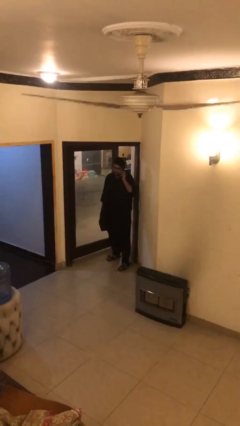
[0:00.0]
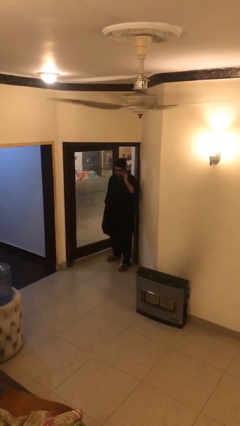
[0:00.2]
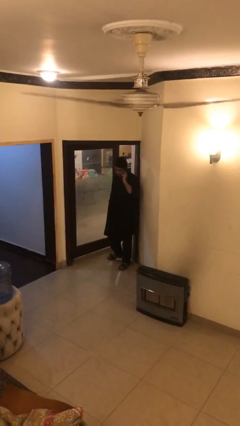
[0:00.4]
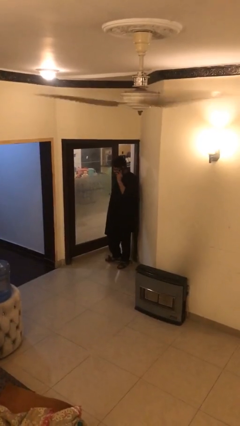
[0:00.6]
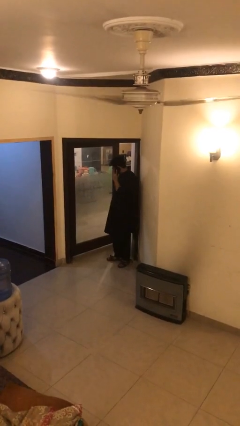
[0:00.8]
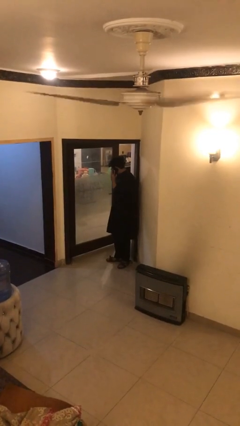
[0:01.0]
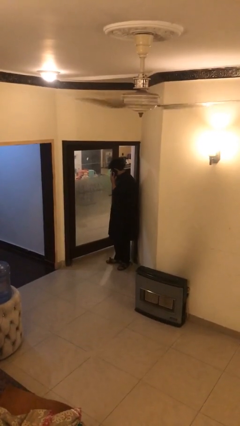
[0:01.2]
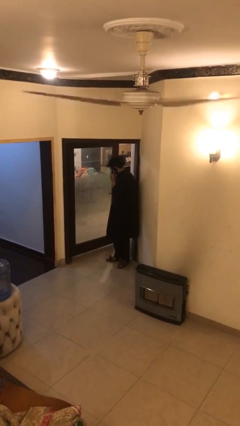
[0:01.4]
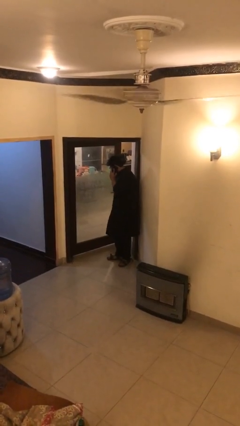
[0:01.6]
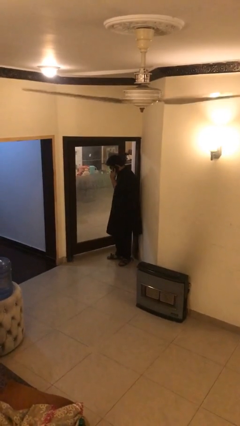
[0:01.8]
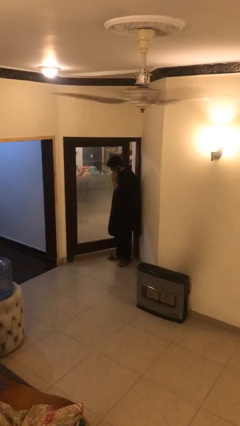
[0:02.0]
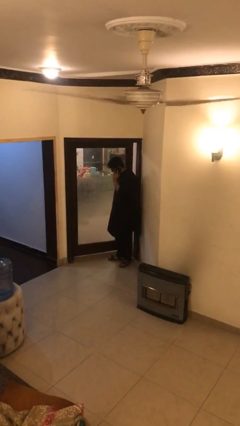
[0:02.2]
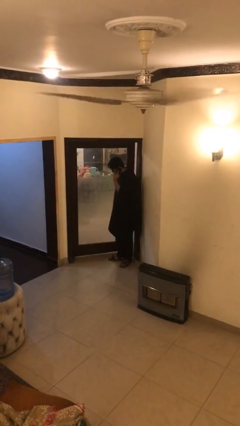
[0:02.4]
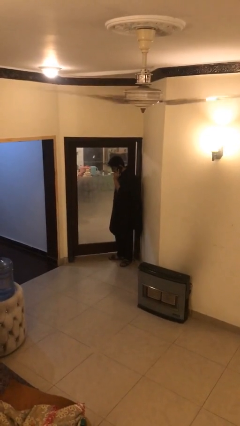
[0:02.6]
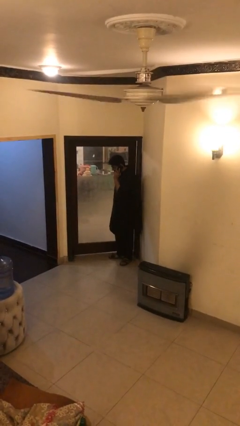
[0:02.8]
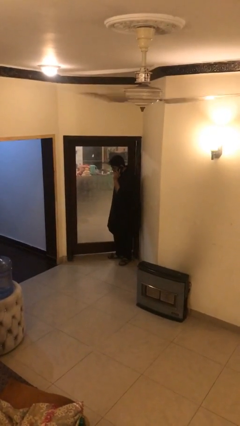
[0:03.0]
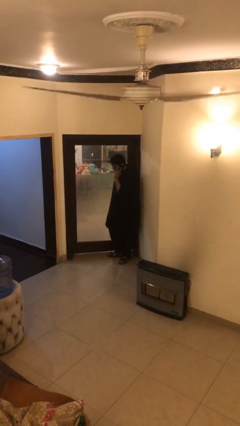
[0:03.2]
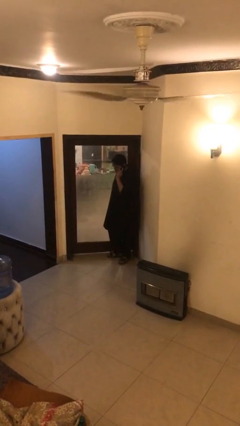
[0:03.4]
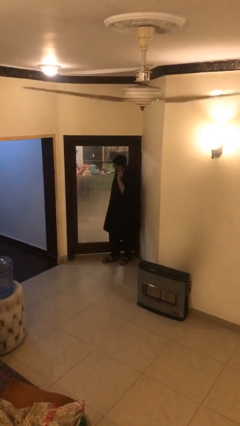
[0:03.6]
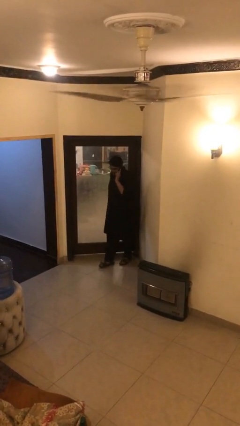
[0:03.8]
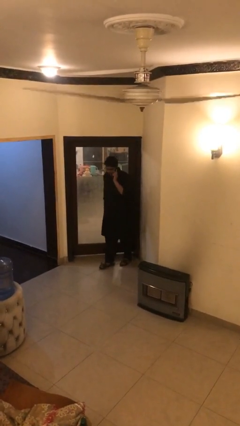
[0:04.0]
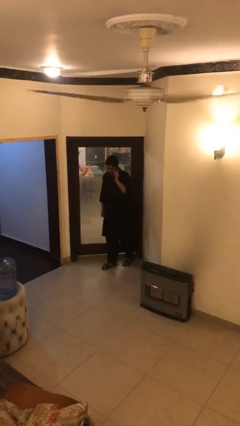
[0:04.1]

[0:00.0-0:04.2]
person closes facility door

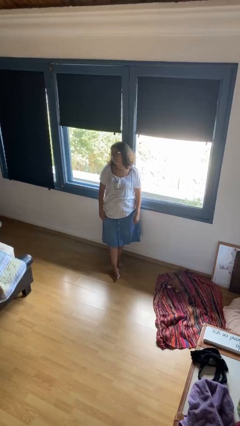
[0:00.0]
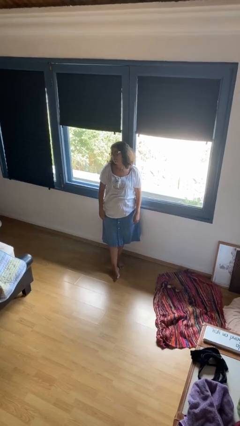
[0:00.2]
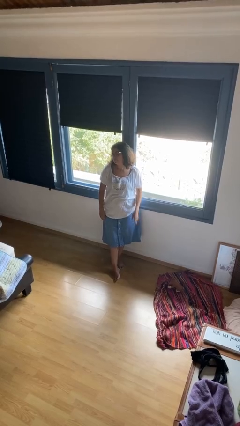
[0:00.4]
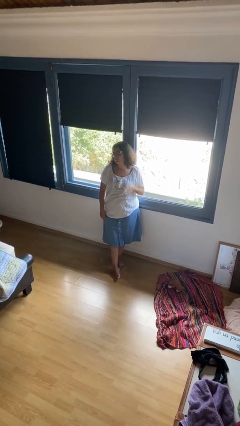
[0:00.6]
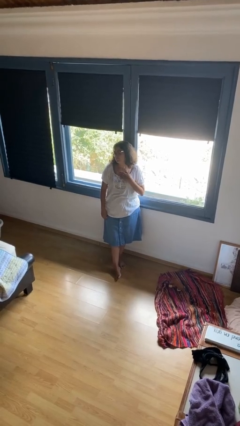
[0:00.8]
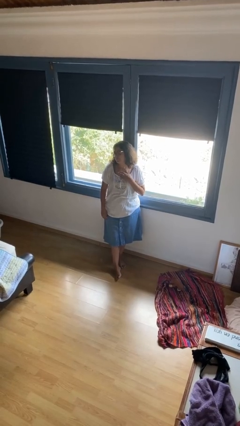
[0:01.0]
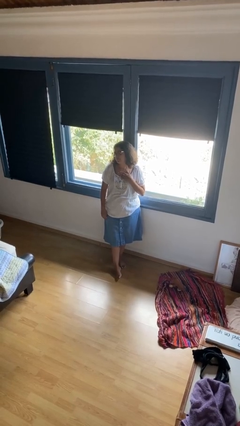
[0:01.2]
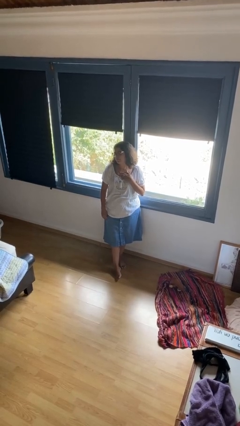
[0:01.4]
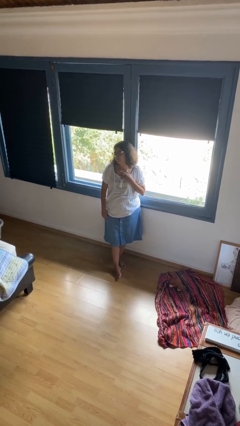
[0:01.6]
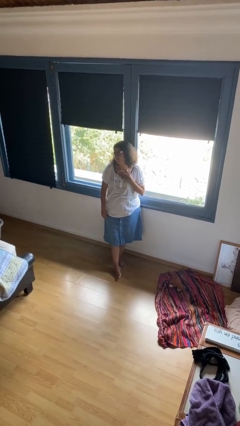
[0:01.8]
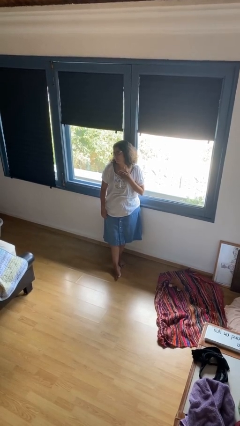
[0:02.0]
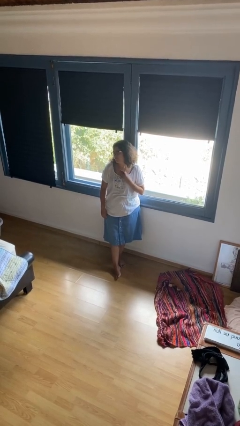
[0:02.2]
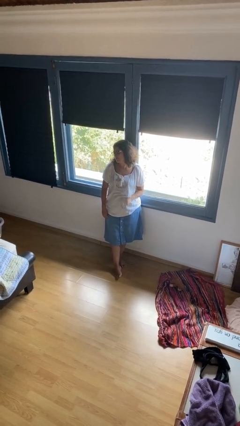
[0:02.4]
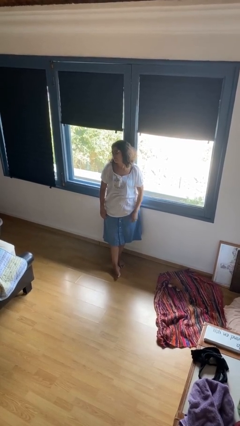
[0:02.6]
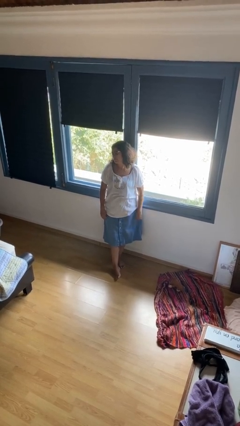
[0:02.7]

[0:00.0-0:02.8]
person drums on chest

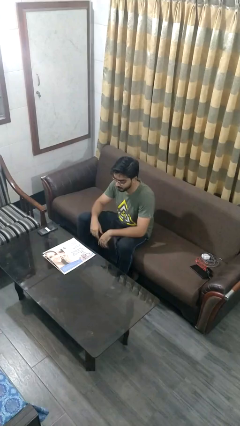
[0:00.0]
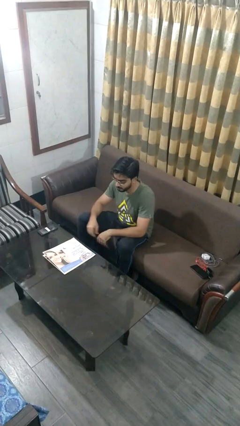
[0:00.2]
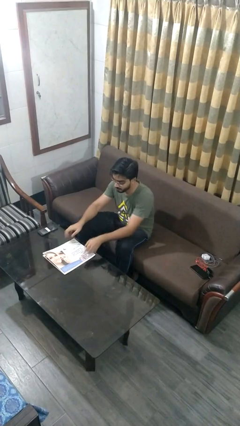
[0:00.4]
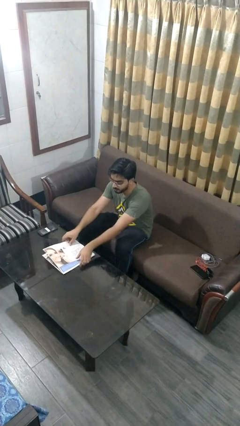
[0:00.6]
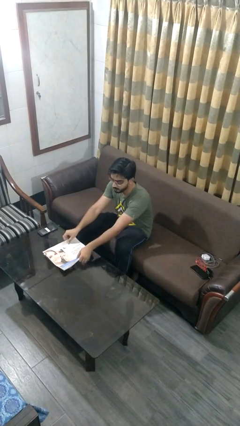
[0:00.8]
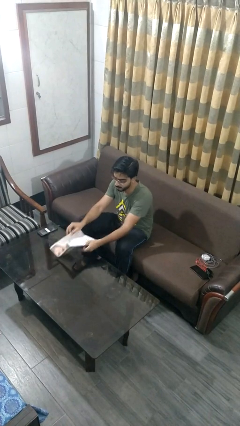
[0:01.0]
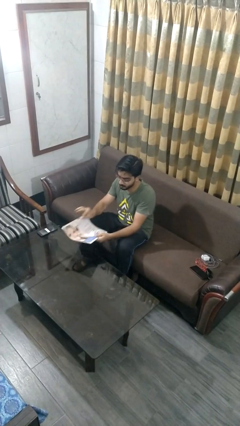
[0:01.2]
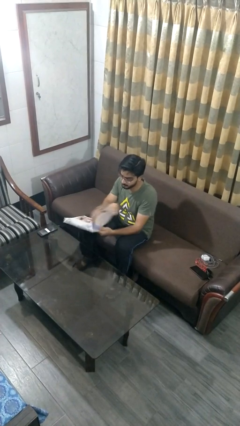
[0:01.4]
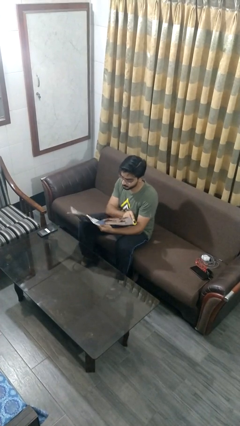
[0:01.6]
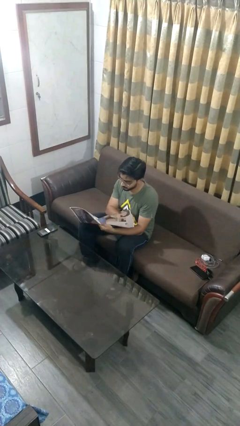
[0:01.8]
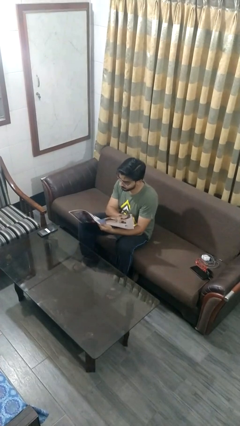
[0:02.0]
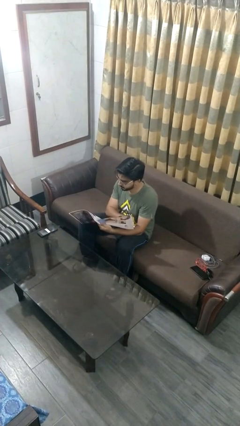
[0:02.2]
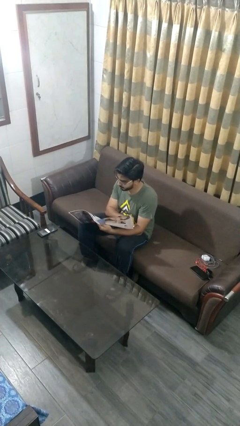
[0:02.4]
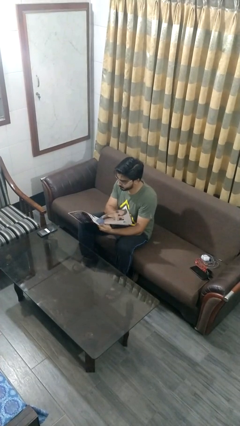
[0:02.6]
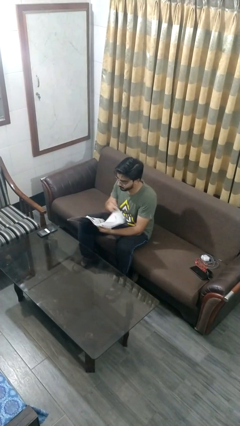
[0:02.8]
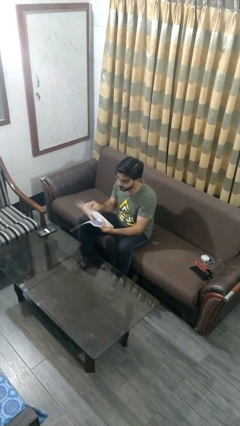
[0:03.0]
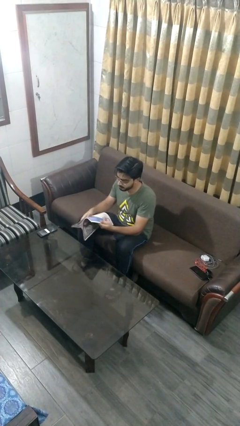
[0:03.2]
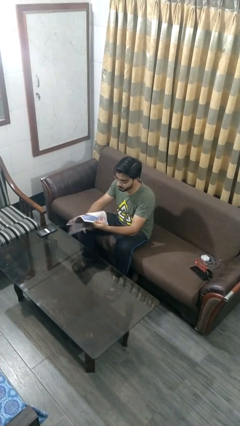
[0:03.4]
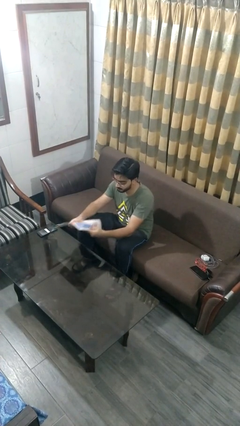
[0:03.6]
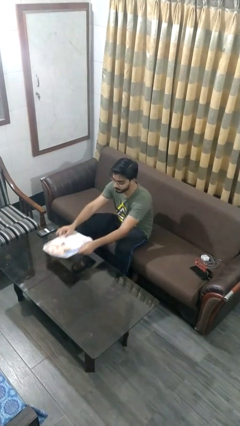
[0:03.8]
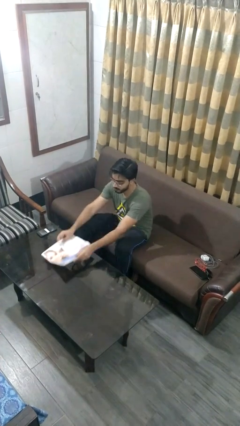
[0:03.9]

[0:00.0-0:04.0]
person reads magazine

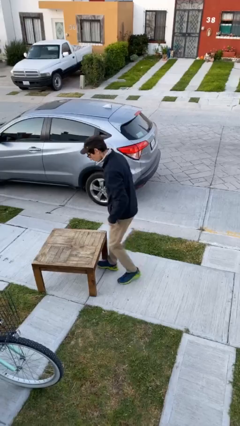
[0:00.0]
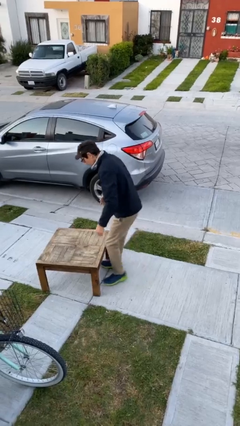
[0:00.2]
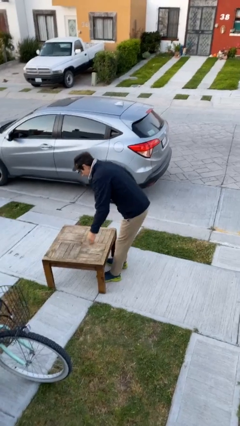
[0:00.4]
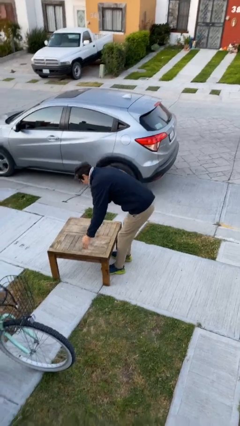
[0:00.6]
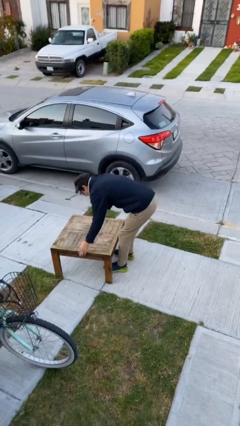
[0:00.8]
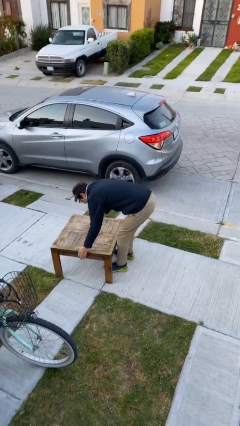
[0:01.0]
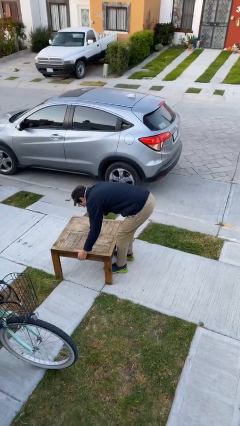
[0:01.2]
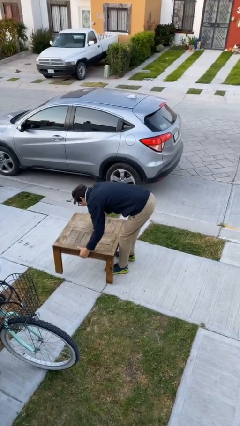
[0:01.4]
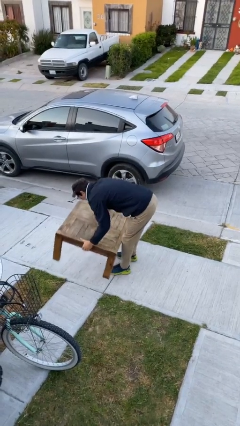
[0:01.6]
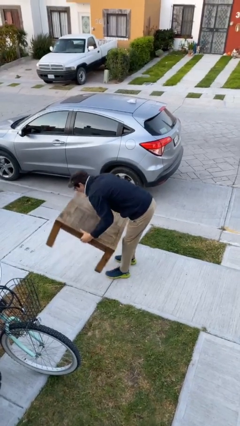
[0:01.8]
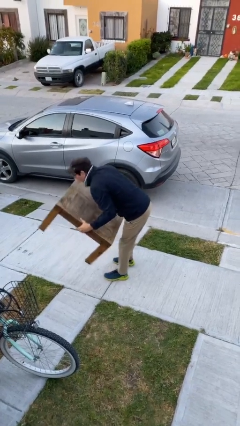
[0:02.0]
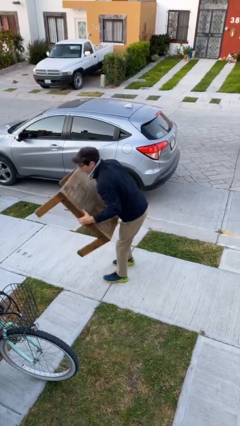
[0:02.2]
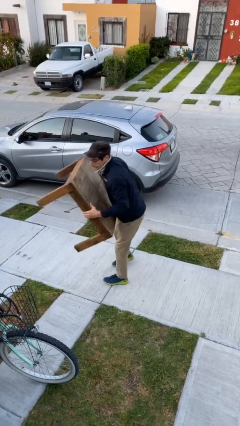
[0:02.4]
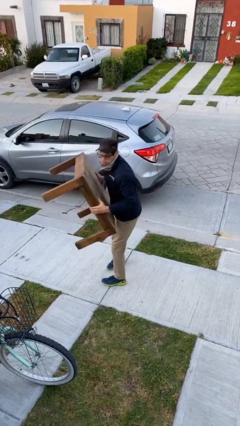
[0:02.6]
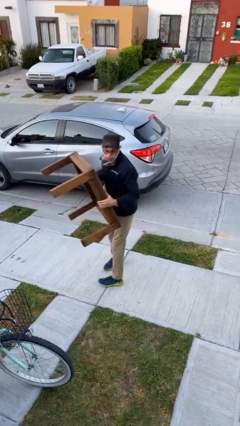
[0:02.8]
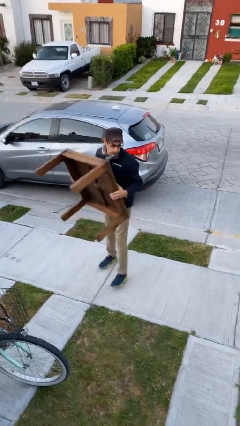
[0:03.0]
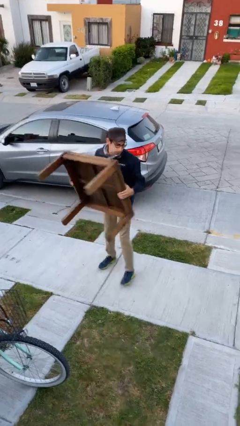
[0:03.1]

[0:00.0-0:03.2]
person picks up object from floor

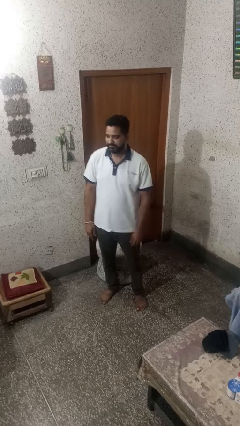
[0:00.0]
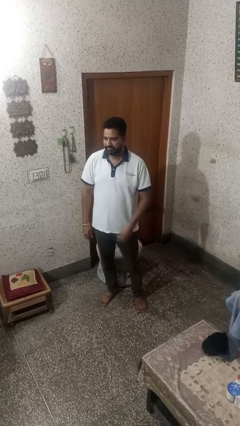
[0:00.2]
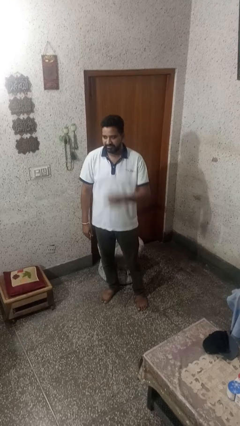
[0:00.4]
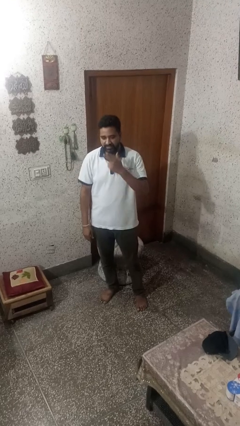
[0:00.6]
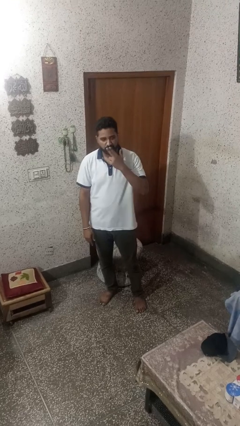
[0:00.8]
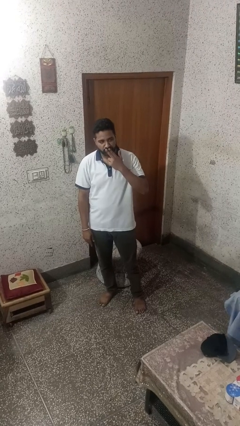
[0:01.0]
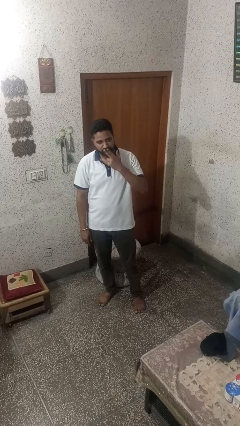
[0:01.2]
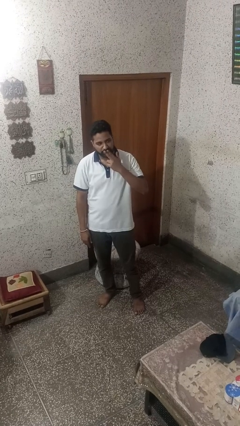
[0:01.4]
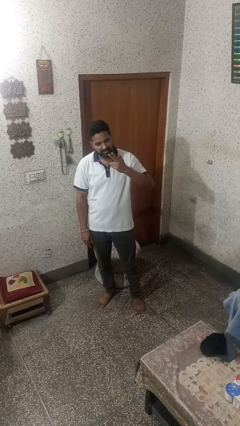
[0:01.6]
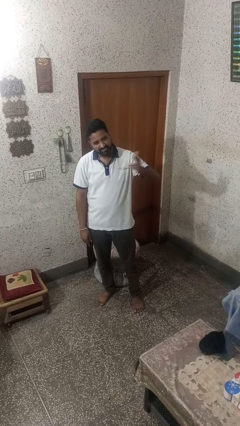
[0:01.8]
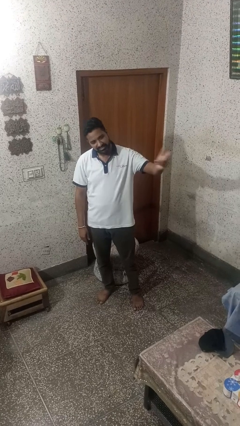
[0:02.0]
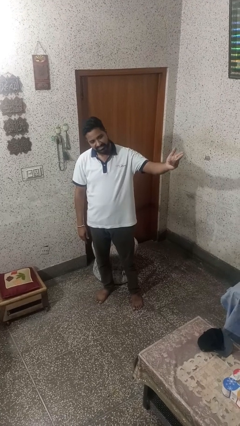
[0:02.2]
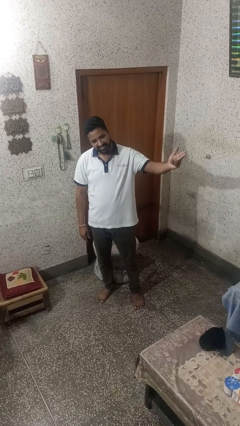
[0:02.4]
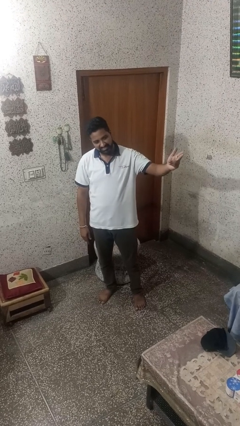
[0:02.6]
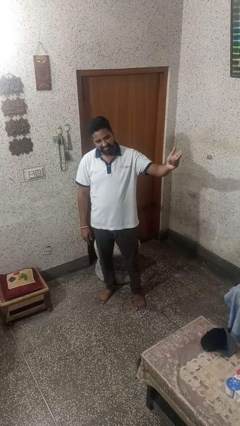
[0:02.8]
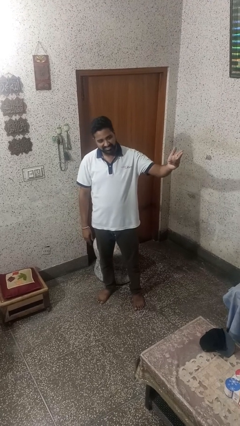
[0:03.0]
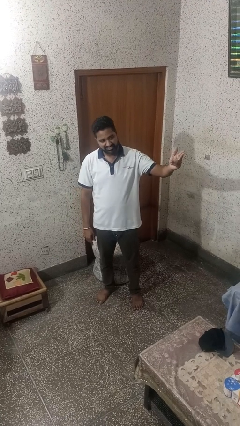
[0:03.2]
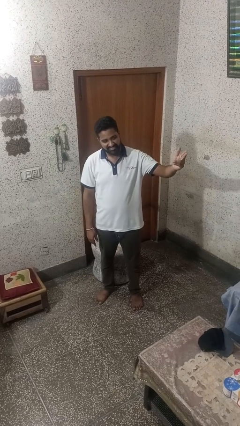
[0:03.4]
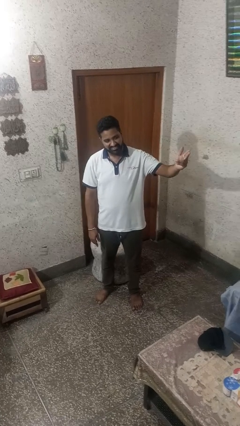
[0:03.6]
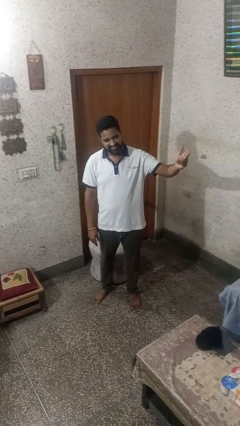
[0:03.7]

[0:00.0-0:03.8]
person gestures blow kiss

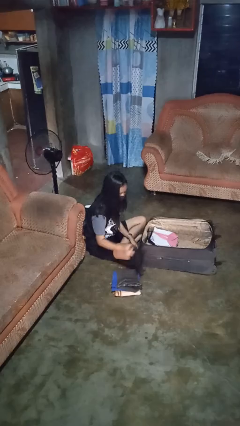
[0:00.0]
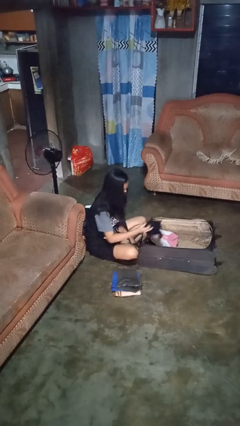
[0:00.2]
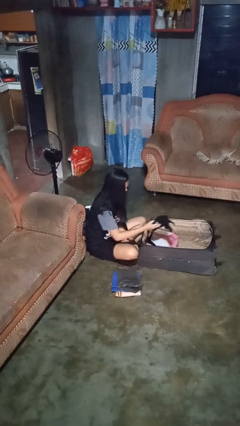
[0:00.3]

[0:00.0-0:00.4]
person loads clothes into suitcase
